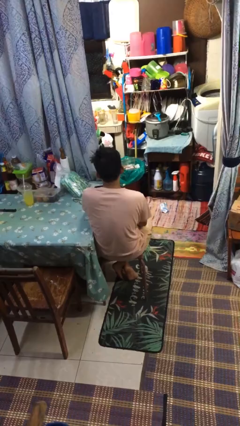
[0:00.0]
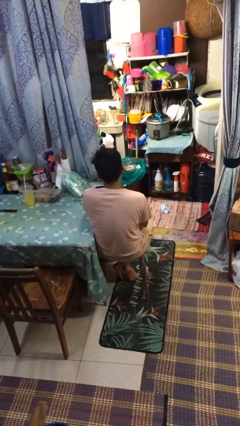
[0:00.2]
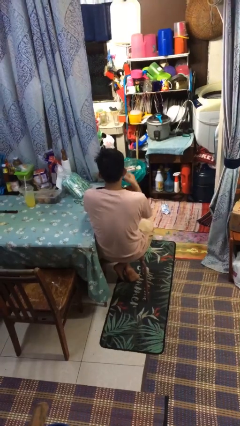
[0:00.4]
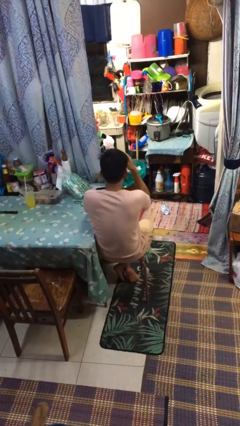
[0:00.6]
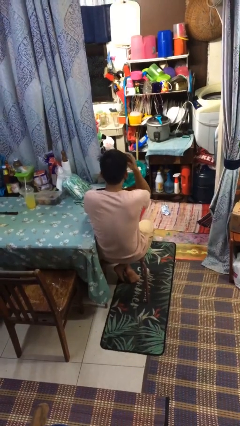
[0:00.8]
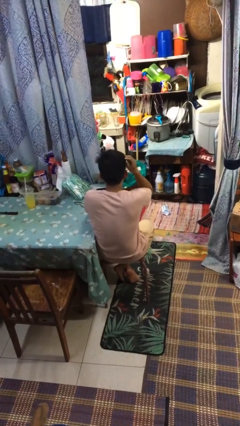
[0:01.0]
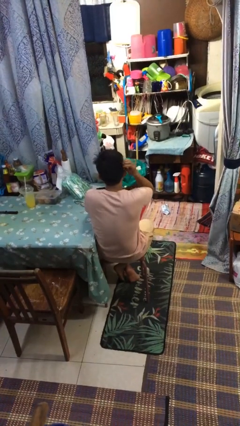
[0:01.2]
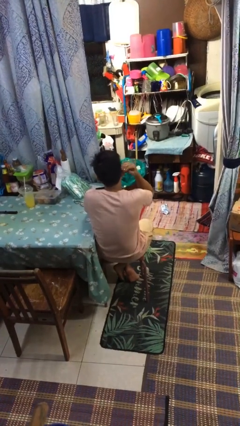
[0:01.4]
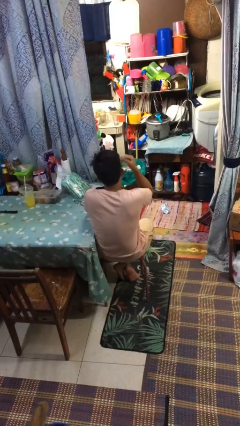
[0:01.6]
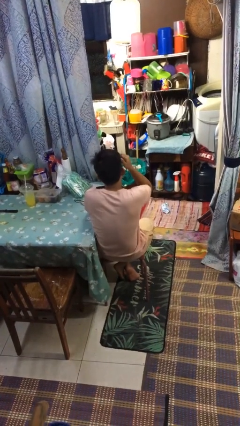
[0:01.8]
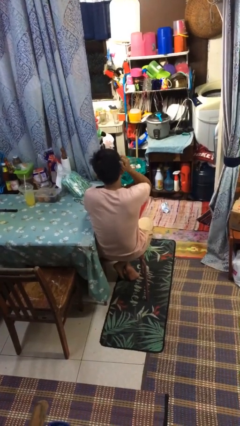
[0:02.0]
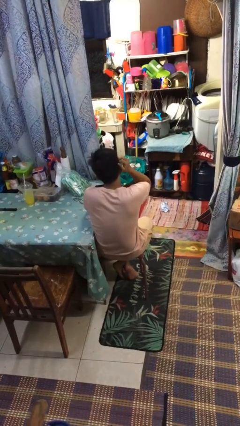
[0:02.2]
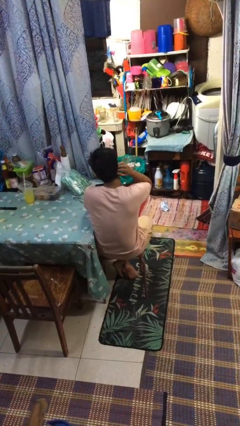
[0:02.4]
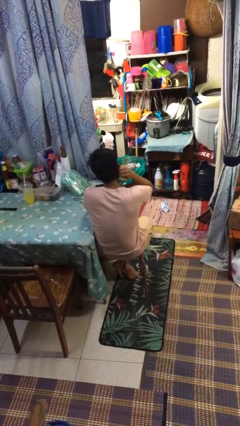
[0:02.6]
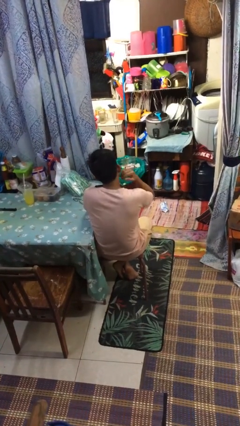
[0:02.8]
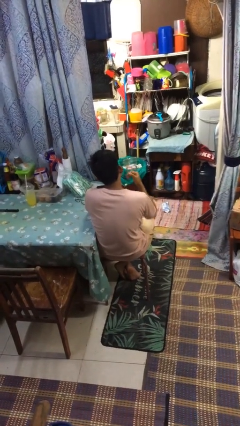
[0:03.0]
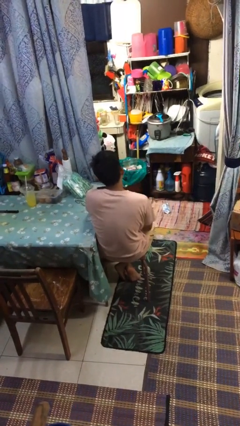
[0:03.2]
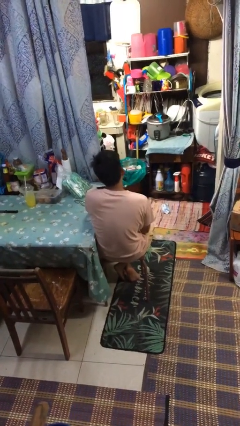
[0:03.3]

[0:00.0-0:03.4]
person strokes hair

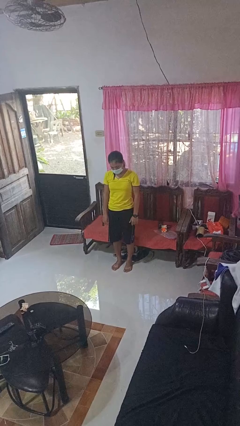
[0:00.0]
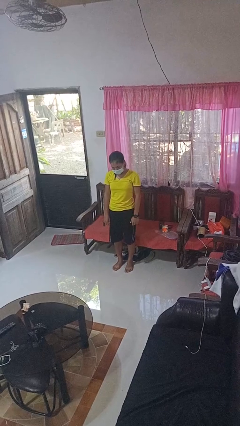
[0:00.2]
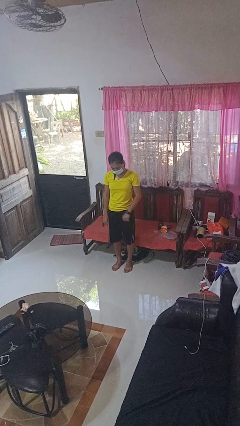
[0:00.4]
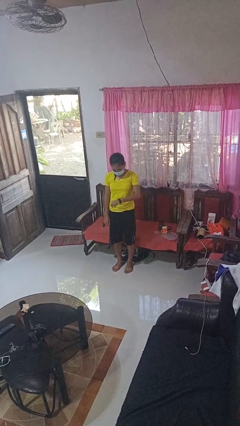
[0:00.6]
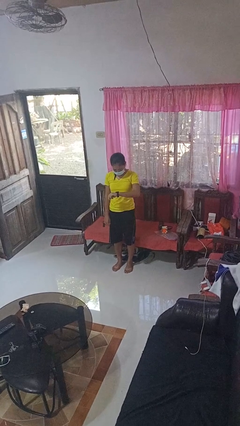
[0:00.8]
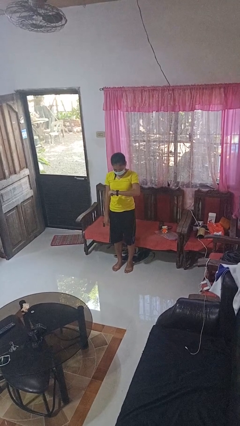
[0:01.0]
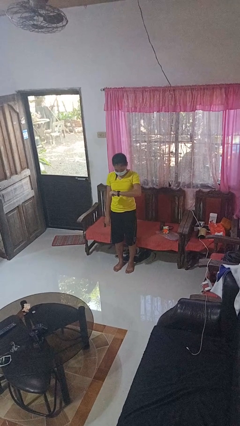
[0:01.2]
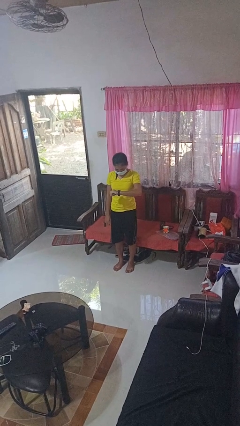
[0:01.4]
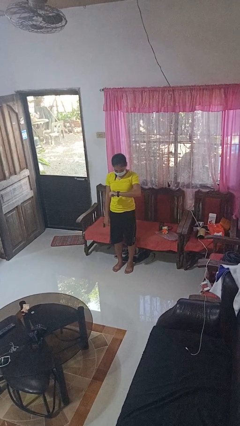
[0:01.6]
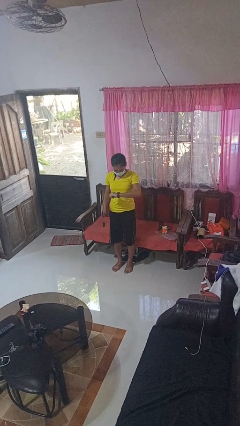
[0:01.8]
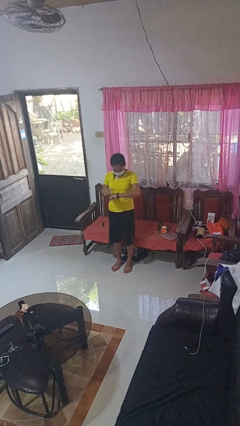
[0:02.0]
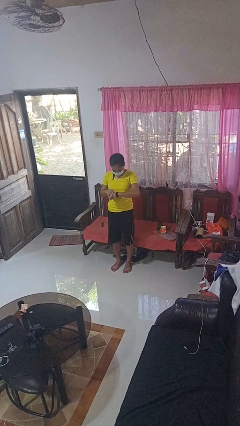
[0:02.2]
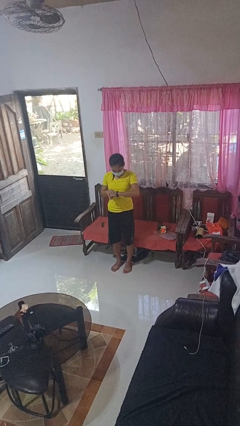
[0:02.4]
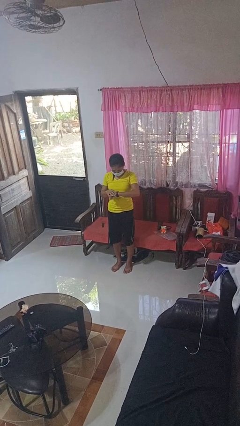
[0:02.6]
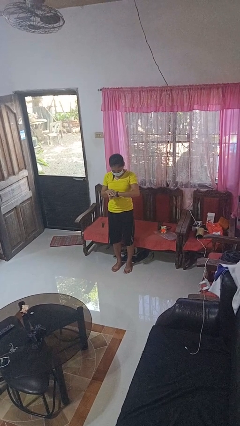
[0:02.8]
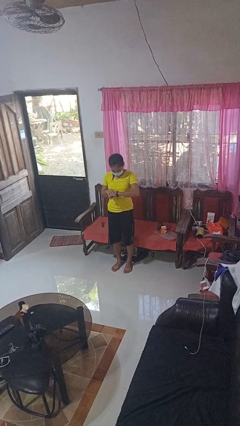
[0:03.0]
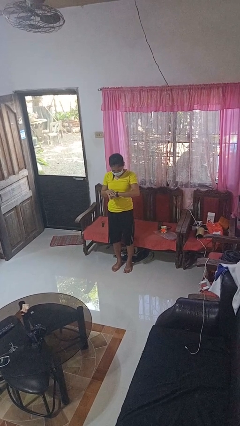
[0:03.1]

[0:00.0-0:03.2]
person looks at wristwatch

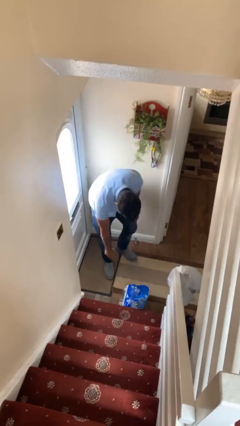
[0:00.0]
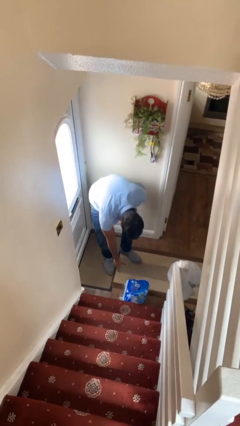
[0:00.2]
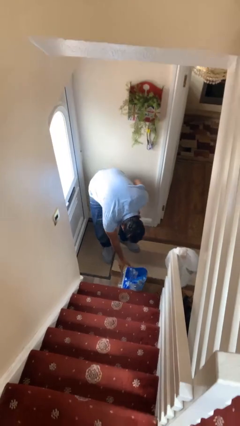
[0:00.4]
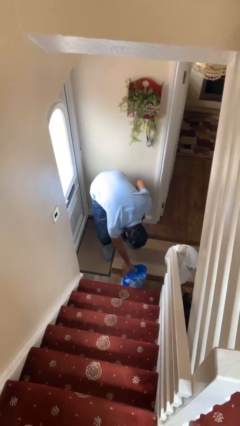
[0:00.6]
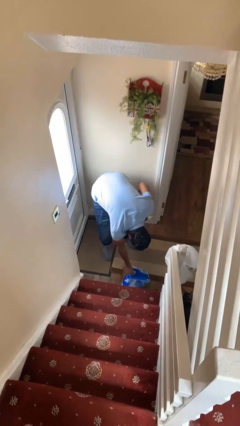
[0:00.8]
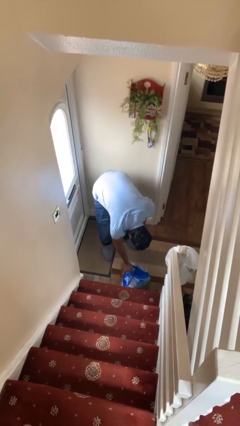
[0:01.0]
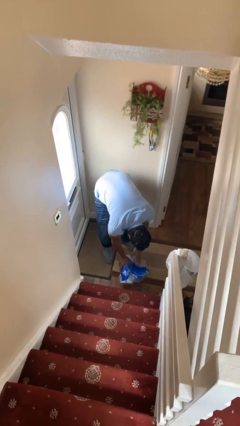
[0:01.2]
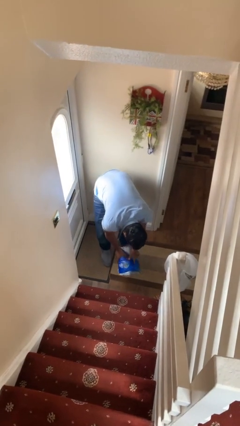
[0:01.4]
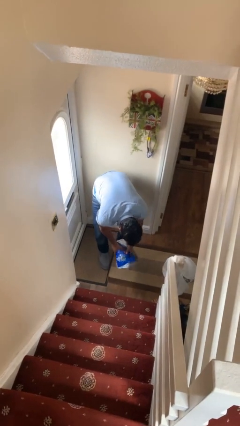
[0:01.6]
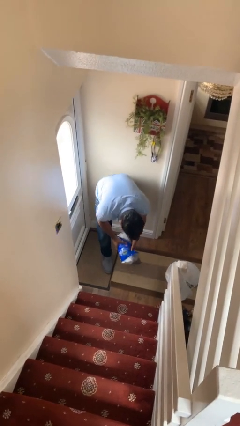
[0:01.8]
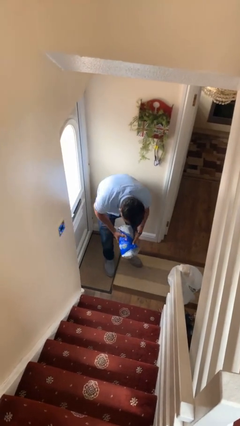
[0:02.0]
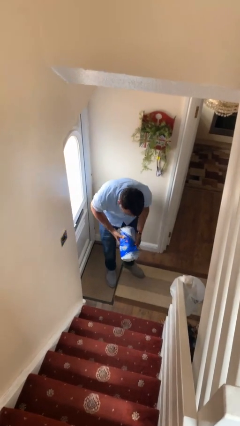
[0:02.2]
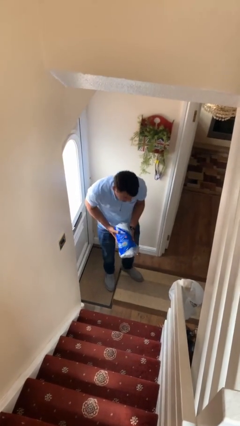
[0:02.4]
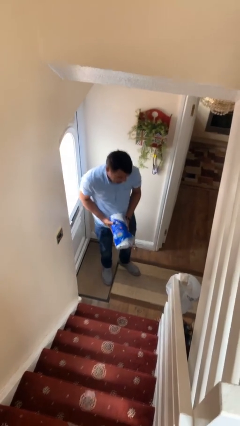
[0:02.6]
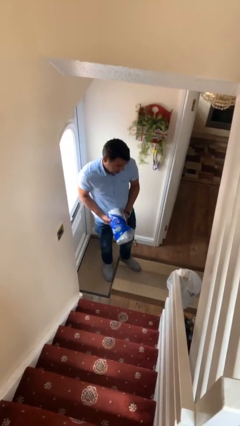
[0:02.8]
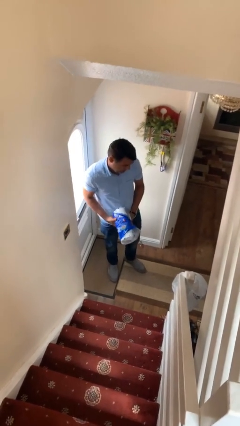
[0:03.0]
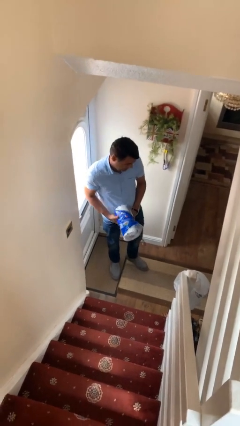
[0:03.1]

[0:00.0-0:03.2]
person picks up object from floor

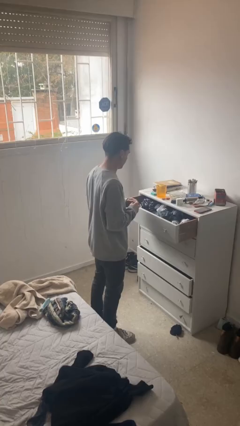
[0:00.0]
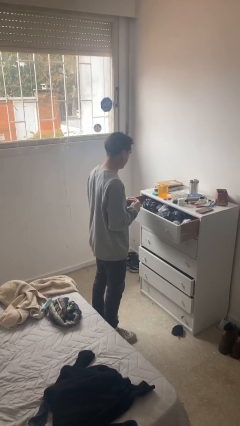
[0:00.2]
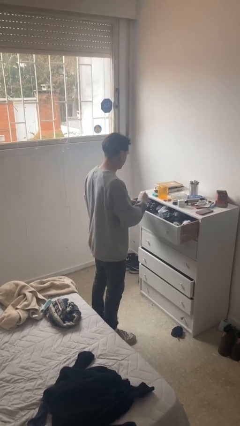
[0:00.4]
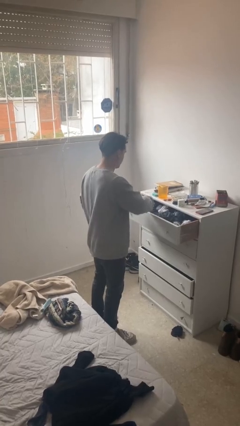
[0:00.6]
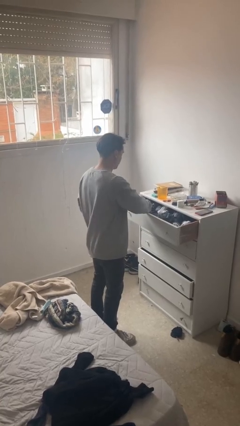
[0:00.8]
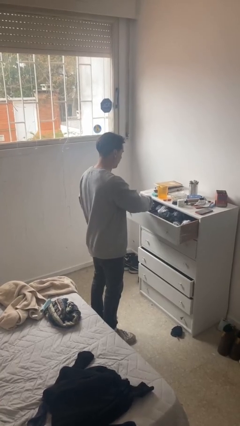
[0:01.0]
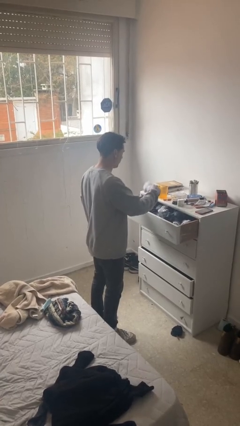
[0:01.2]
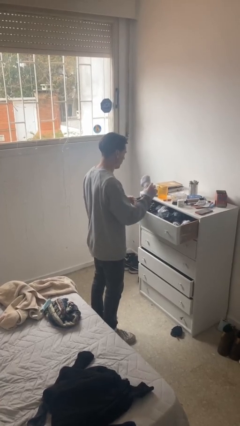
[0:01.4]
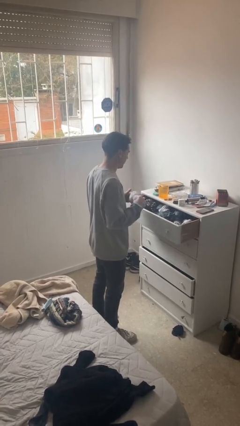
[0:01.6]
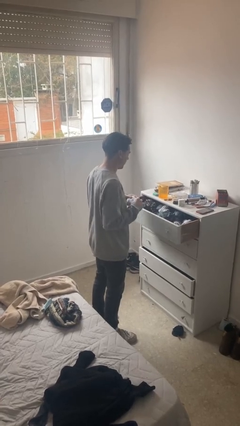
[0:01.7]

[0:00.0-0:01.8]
person takes clothes from dresser

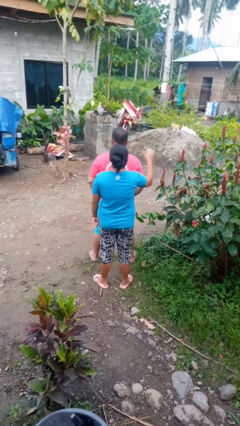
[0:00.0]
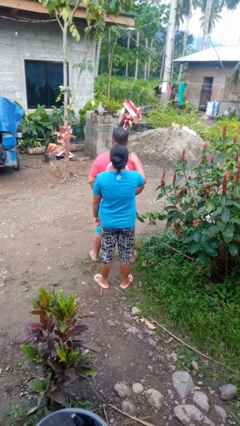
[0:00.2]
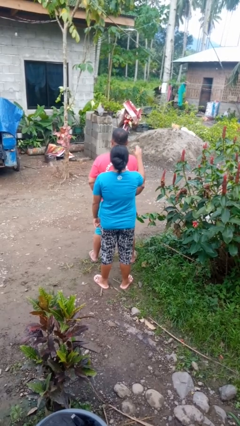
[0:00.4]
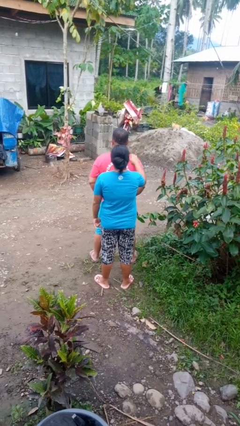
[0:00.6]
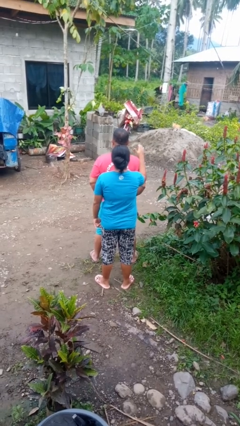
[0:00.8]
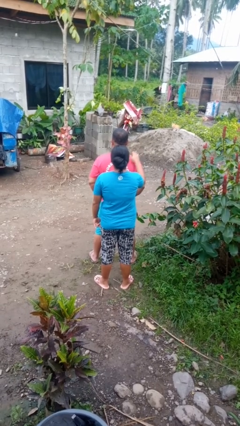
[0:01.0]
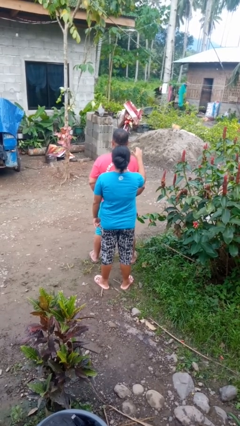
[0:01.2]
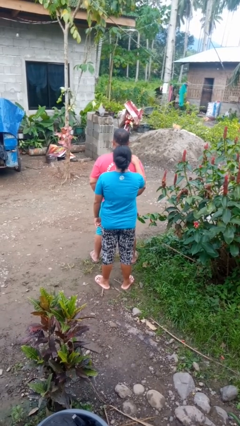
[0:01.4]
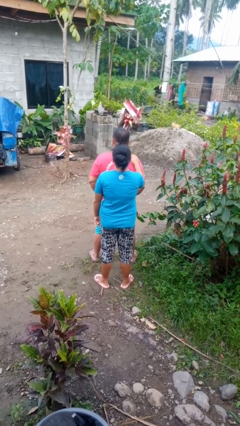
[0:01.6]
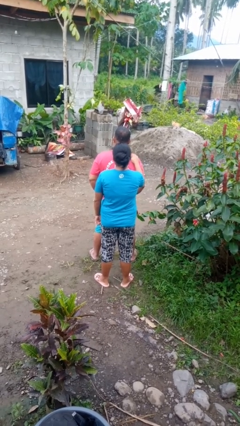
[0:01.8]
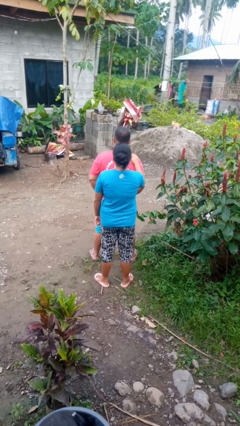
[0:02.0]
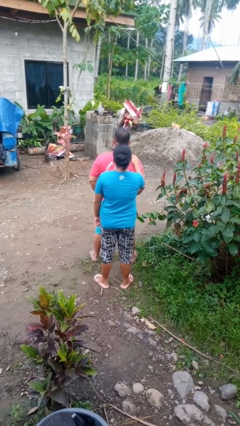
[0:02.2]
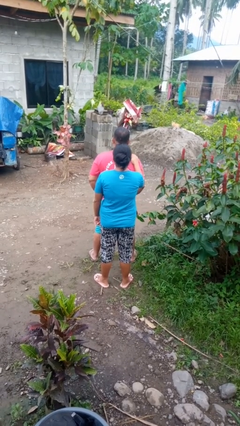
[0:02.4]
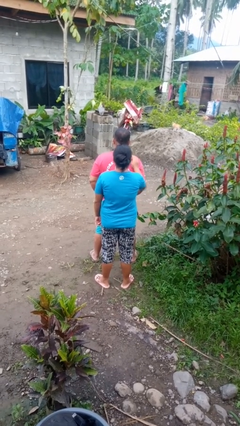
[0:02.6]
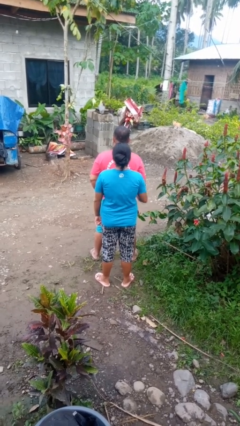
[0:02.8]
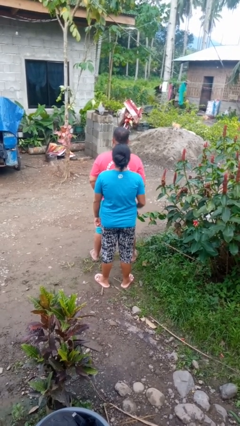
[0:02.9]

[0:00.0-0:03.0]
person pounds shoulders of person

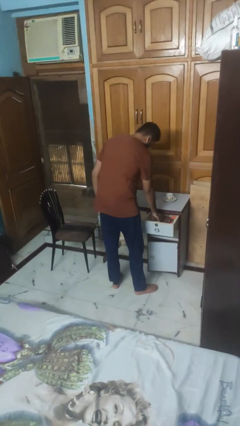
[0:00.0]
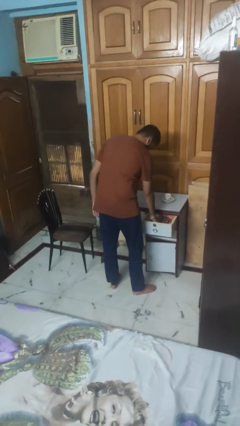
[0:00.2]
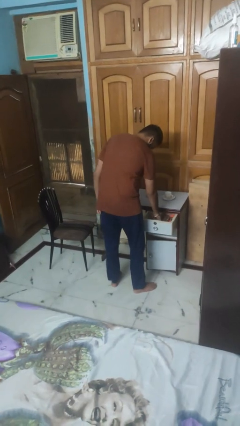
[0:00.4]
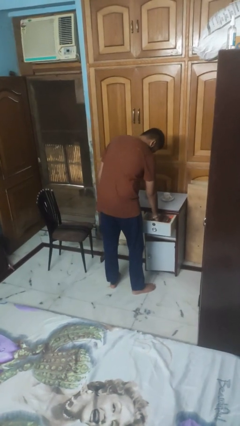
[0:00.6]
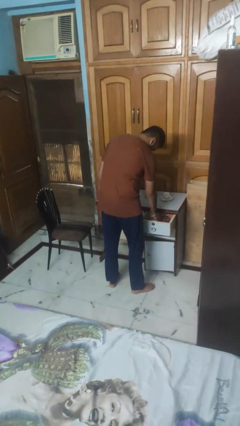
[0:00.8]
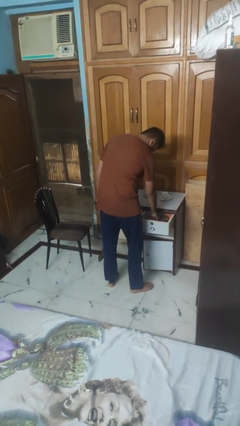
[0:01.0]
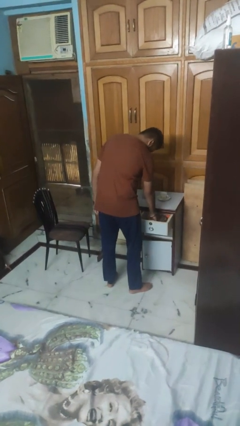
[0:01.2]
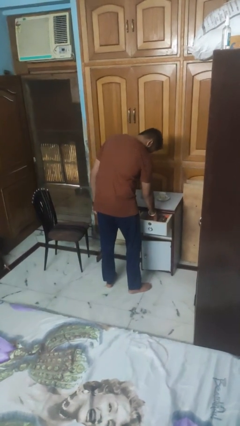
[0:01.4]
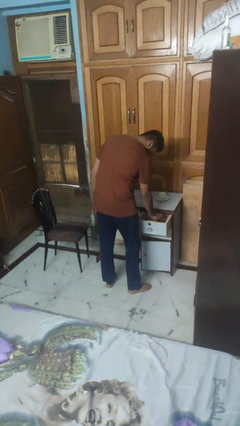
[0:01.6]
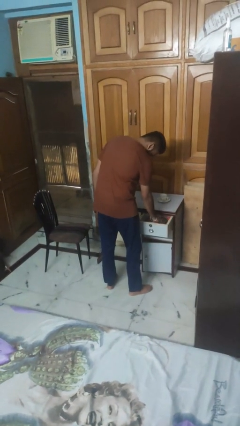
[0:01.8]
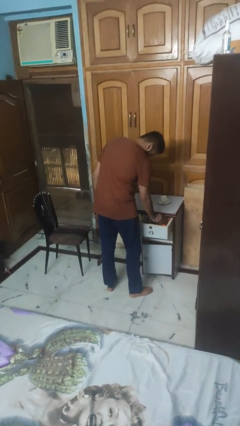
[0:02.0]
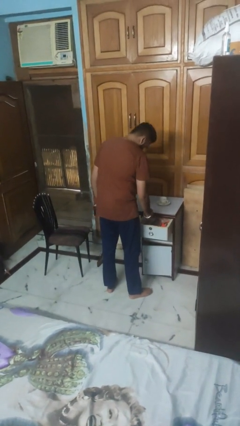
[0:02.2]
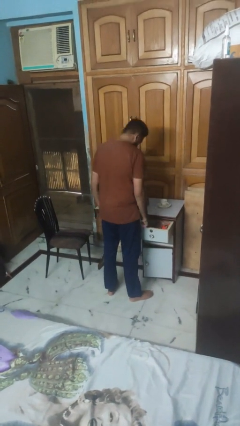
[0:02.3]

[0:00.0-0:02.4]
person searches in kitchen drawer

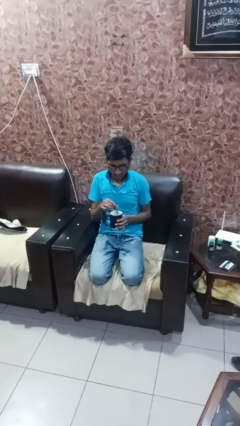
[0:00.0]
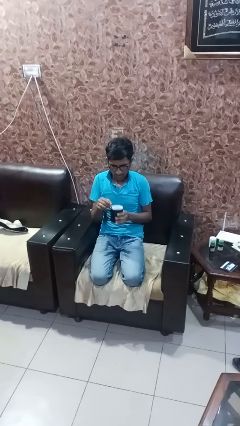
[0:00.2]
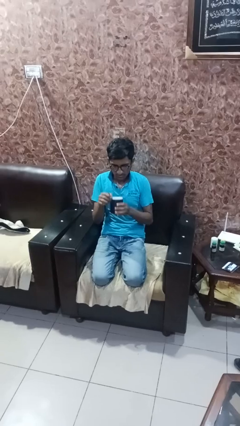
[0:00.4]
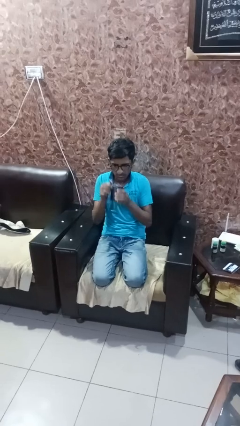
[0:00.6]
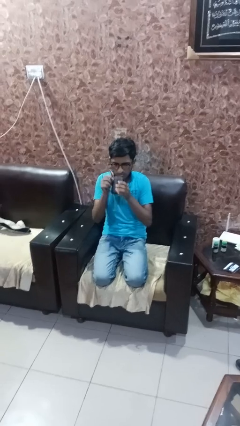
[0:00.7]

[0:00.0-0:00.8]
person stirs mug
